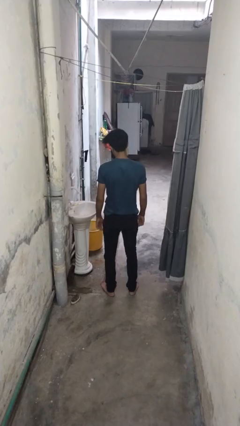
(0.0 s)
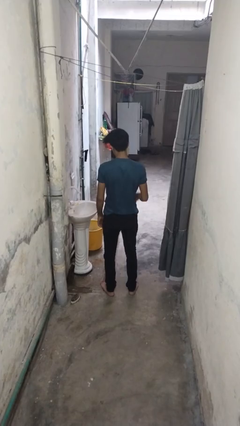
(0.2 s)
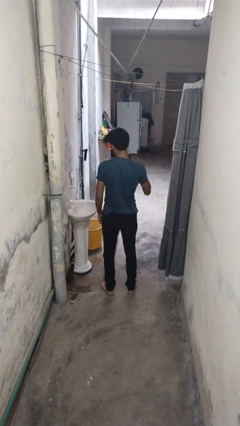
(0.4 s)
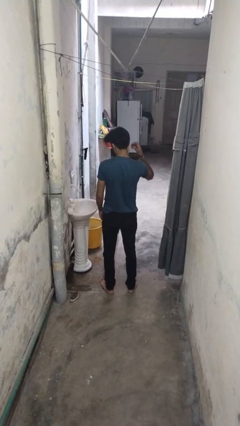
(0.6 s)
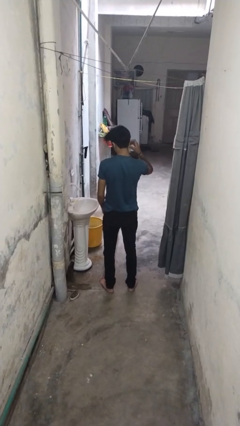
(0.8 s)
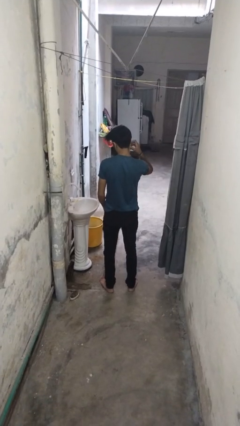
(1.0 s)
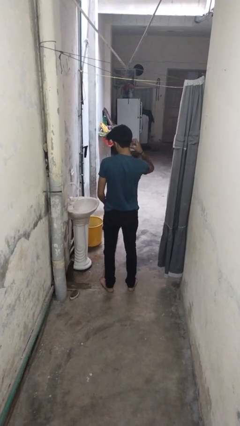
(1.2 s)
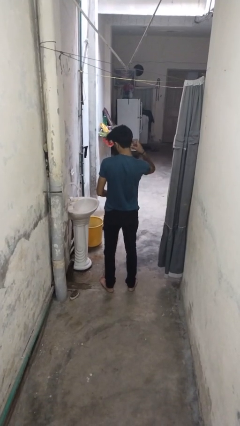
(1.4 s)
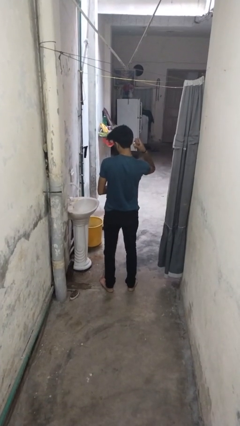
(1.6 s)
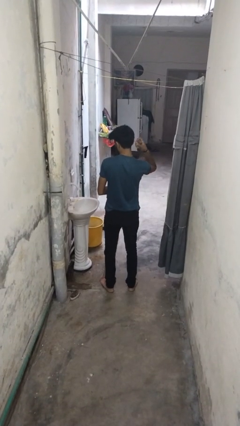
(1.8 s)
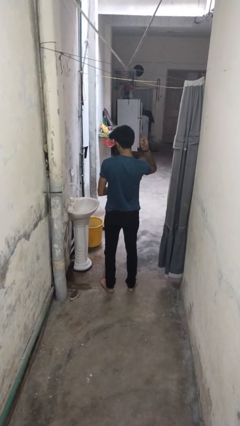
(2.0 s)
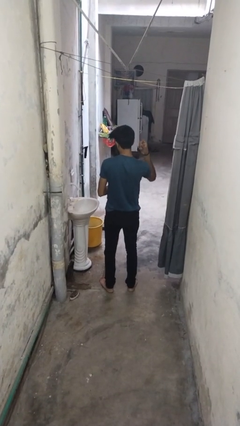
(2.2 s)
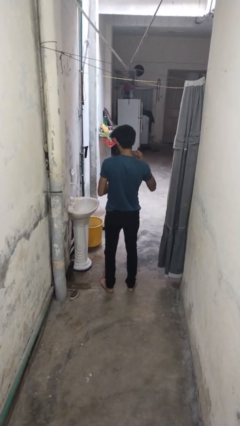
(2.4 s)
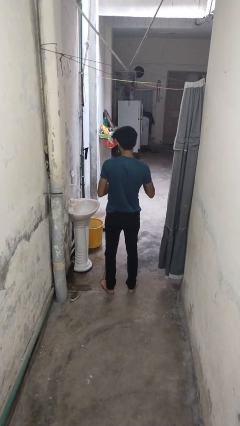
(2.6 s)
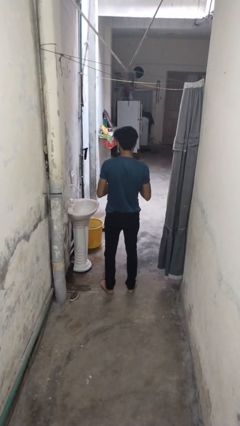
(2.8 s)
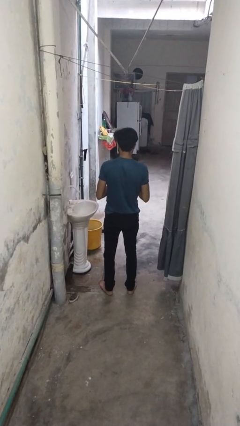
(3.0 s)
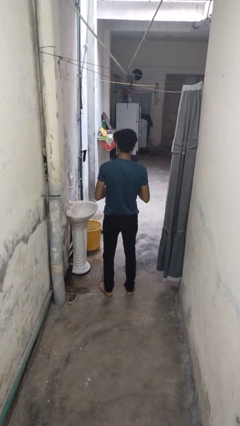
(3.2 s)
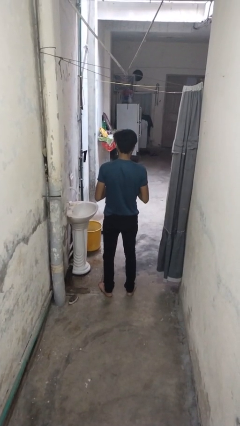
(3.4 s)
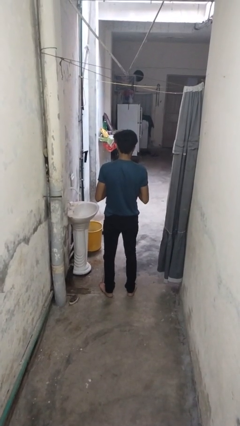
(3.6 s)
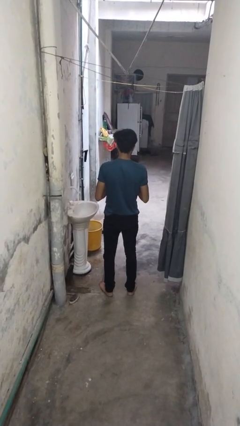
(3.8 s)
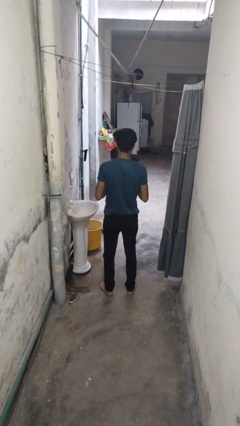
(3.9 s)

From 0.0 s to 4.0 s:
person takes off earrings

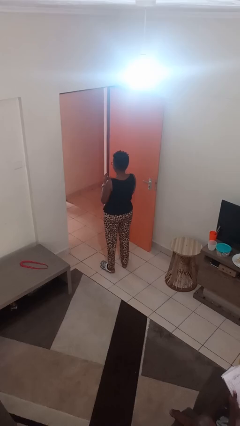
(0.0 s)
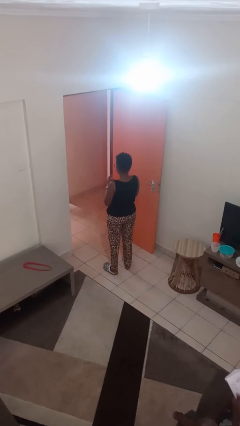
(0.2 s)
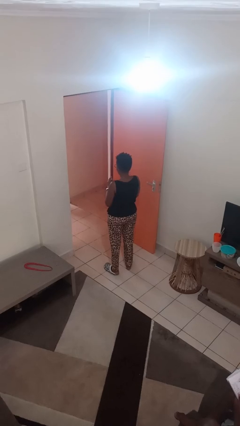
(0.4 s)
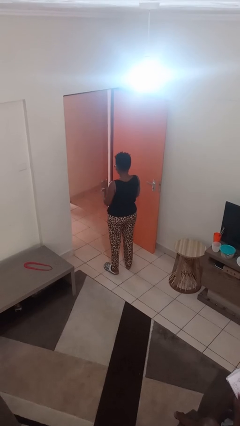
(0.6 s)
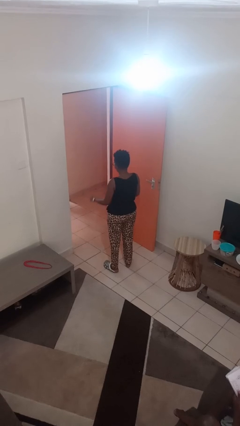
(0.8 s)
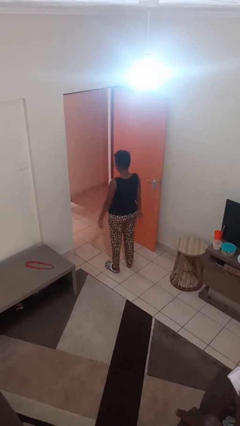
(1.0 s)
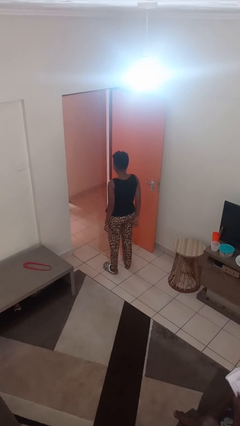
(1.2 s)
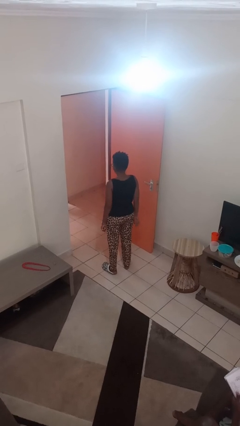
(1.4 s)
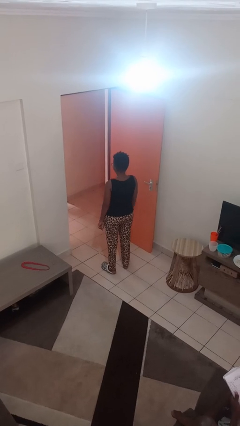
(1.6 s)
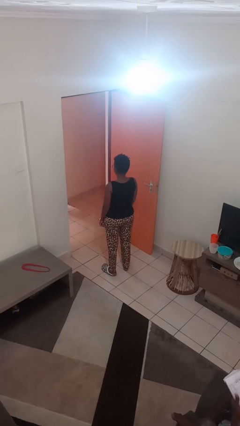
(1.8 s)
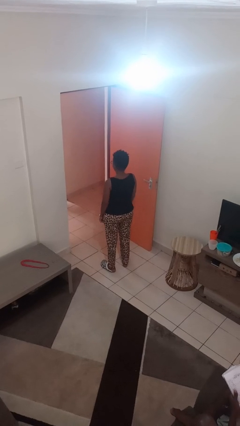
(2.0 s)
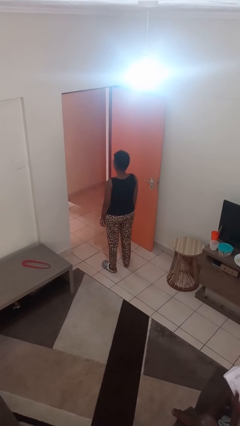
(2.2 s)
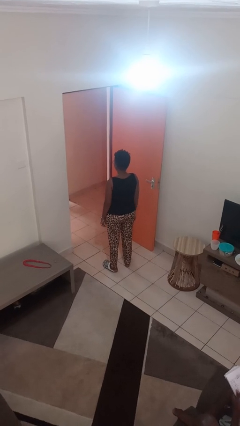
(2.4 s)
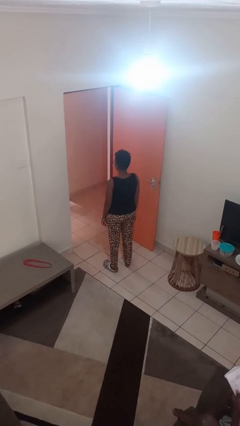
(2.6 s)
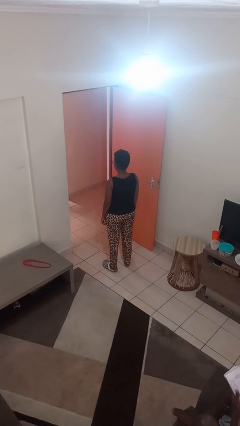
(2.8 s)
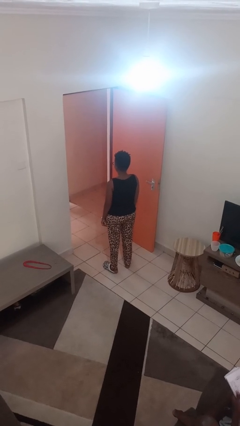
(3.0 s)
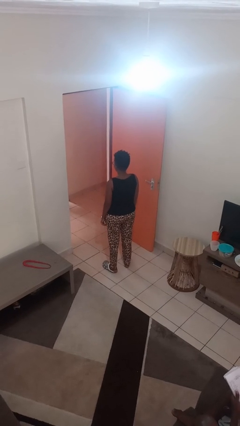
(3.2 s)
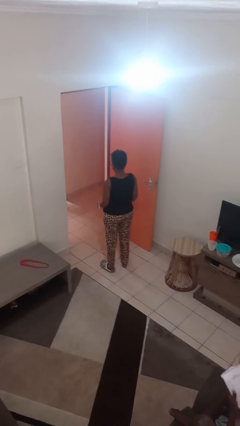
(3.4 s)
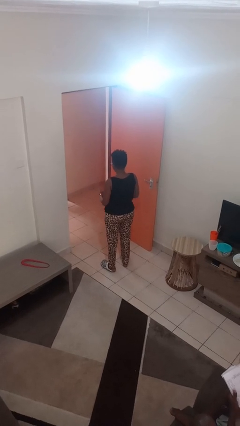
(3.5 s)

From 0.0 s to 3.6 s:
person puts on ring

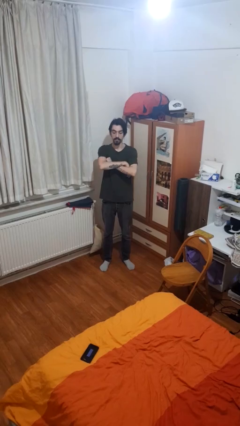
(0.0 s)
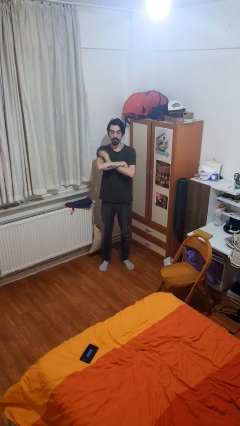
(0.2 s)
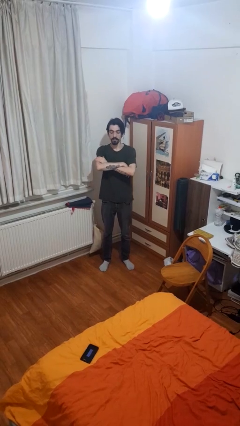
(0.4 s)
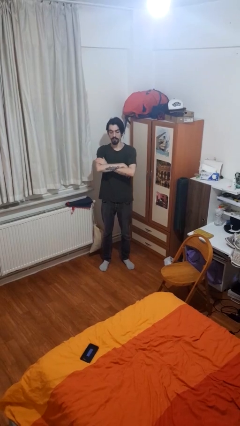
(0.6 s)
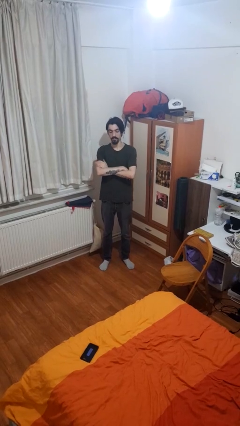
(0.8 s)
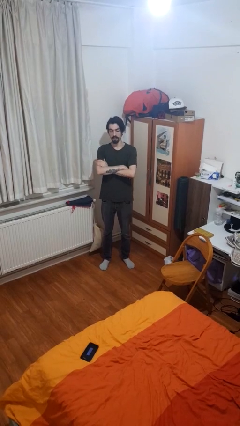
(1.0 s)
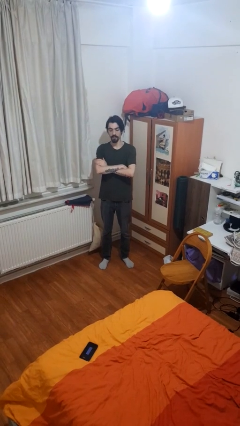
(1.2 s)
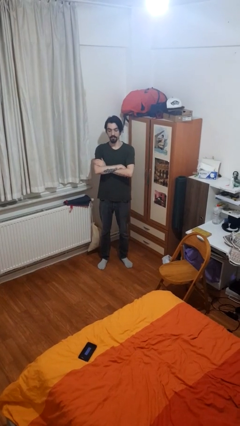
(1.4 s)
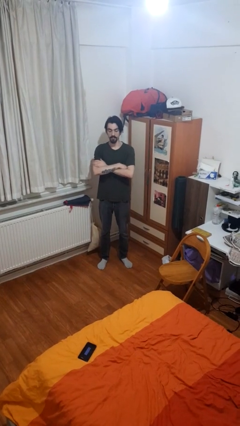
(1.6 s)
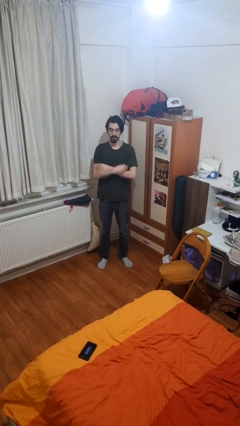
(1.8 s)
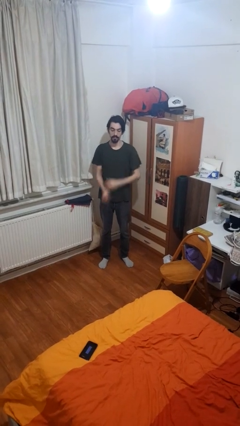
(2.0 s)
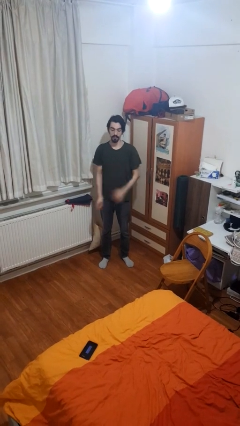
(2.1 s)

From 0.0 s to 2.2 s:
person crosses arms

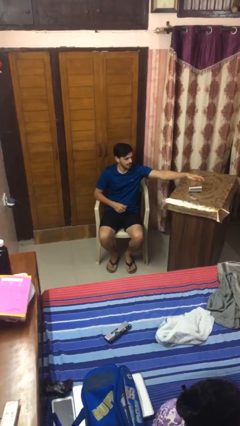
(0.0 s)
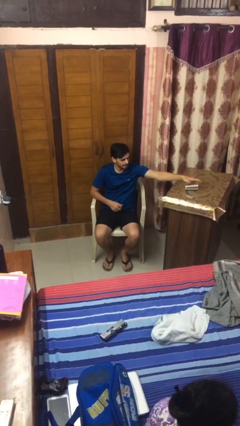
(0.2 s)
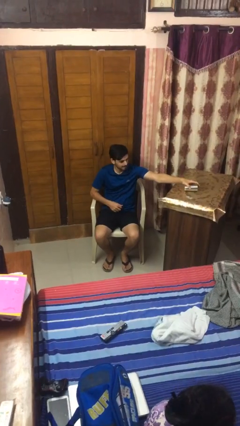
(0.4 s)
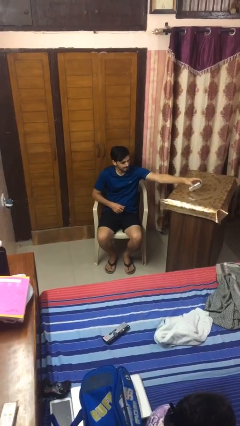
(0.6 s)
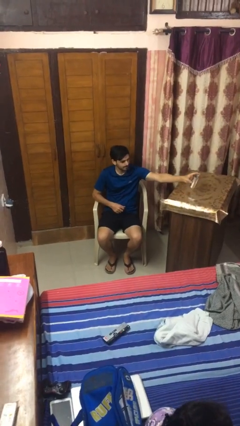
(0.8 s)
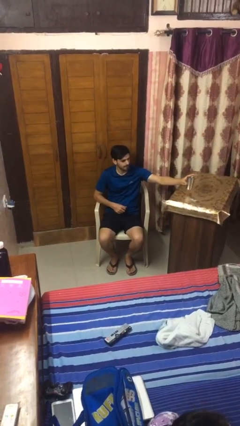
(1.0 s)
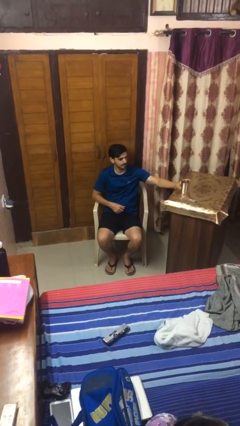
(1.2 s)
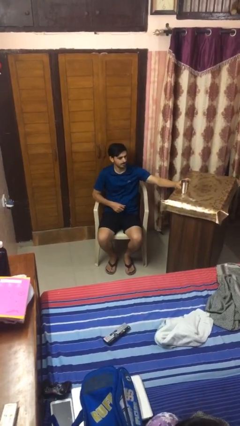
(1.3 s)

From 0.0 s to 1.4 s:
person sets upright glass

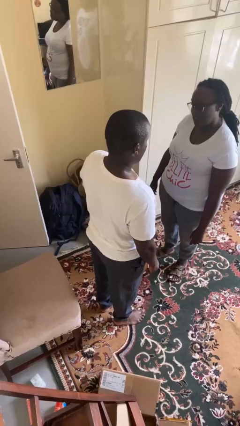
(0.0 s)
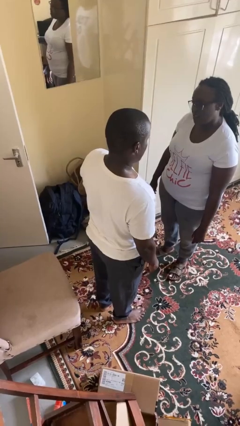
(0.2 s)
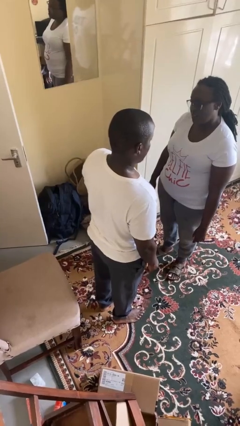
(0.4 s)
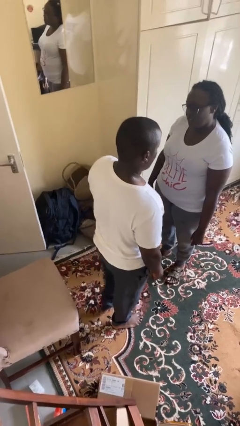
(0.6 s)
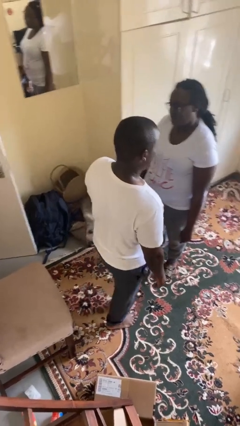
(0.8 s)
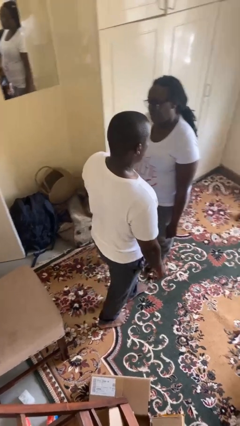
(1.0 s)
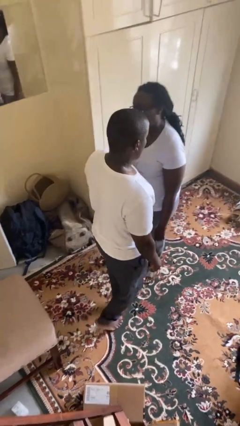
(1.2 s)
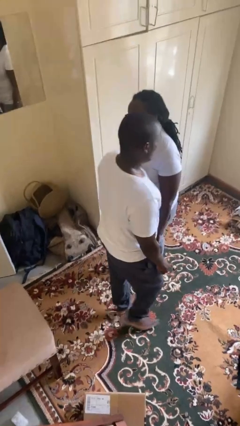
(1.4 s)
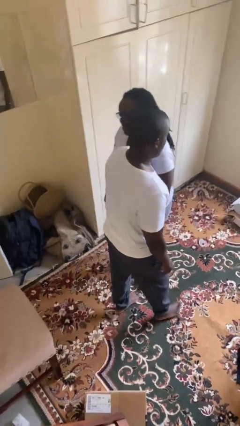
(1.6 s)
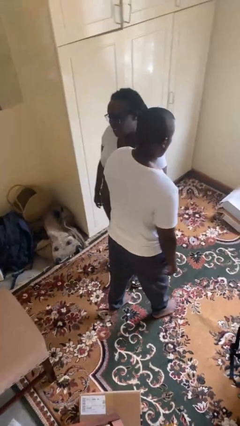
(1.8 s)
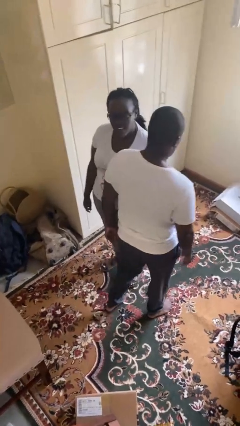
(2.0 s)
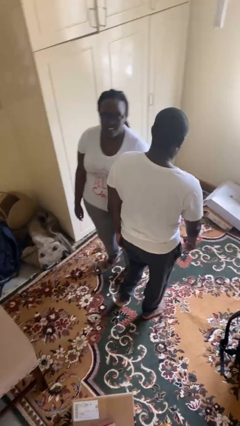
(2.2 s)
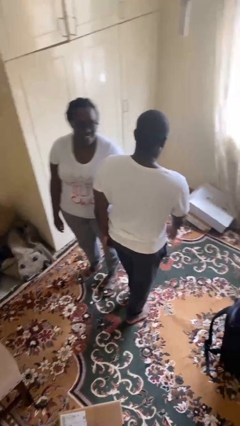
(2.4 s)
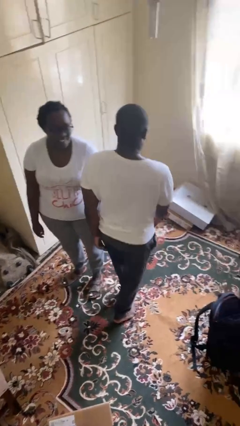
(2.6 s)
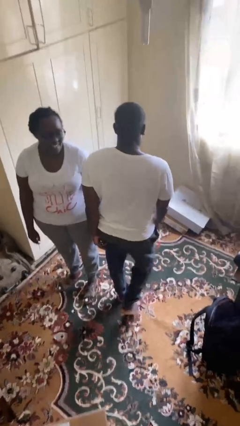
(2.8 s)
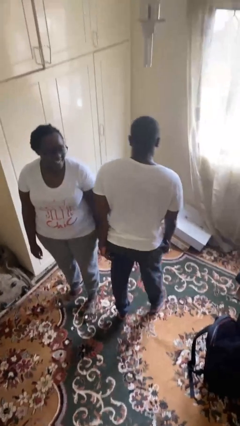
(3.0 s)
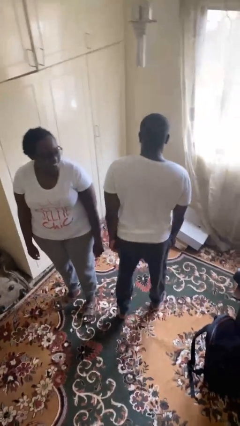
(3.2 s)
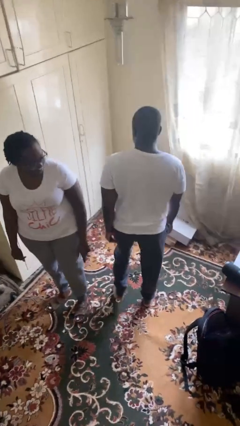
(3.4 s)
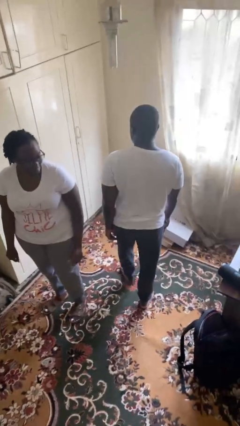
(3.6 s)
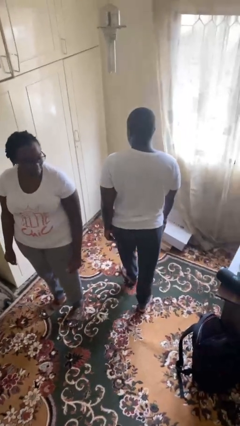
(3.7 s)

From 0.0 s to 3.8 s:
person bumps into person

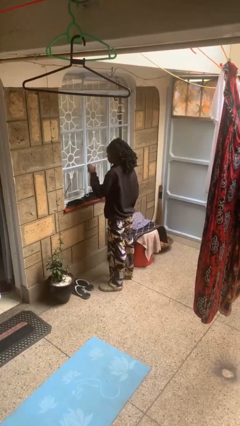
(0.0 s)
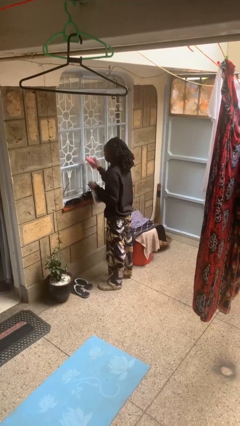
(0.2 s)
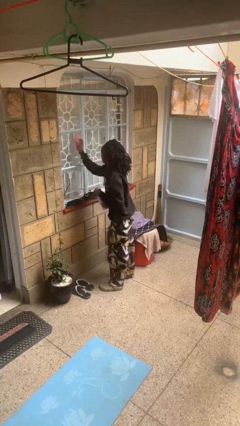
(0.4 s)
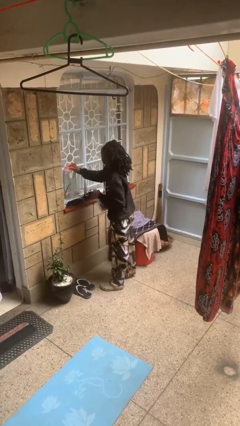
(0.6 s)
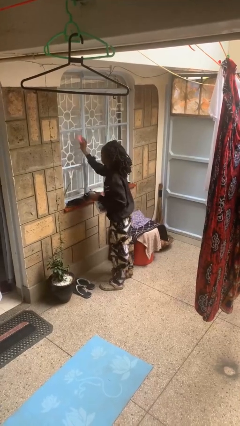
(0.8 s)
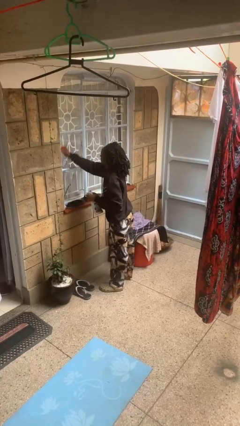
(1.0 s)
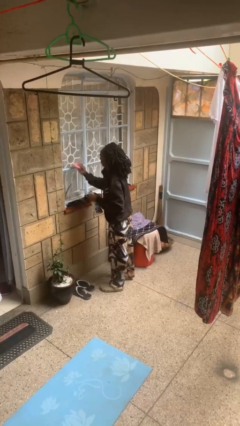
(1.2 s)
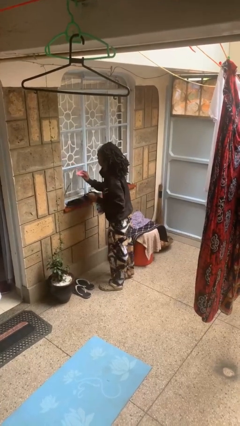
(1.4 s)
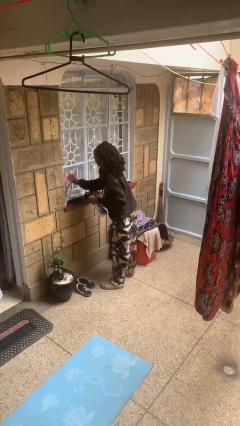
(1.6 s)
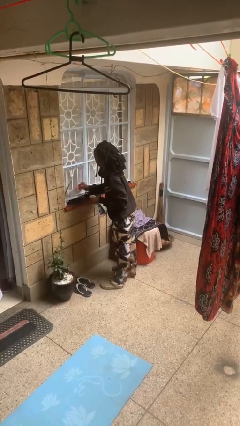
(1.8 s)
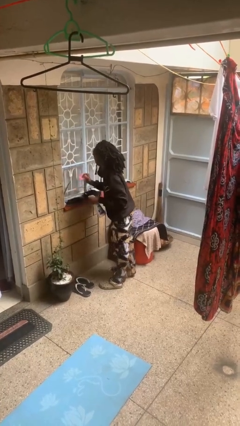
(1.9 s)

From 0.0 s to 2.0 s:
person washes window

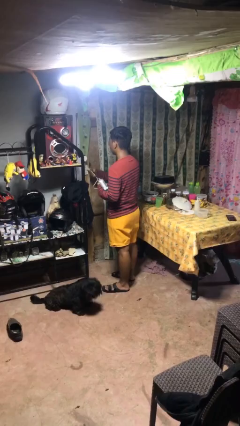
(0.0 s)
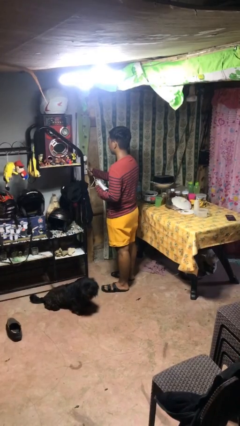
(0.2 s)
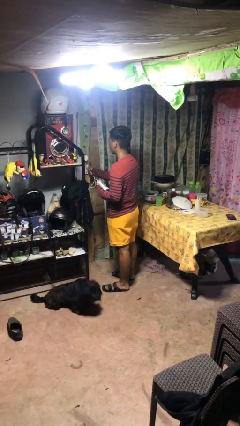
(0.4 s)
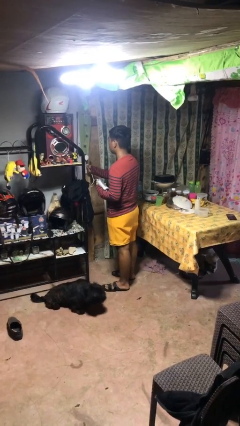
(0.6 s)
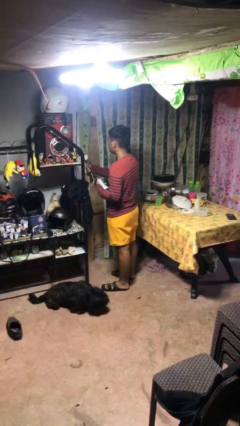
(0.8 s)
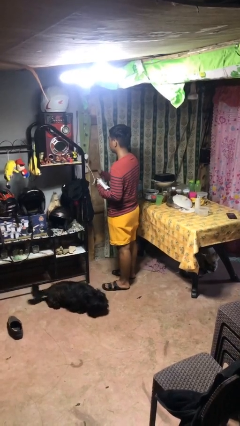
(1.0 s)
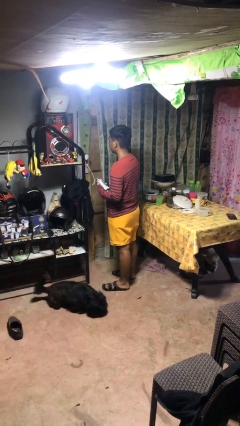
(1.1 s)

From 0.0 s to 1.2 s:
person plugs into electrical socket
